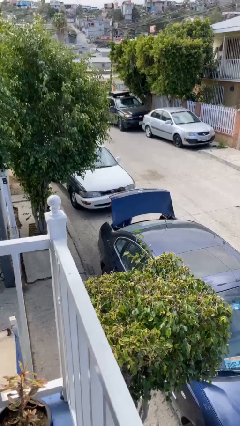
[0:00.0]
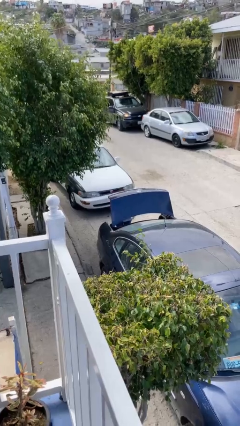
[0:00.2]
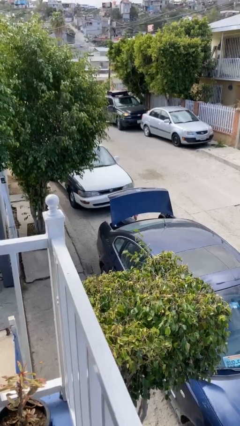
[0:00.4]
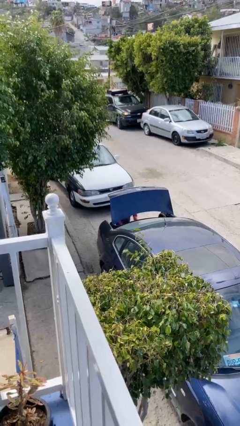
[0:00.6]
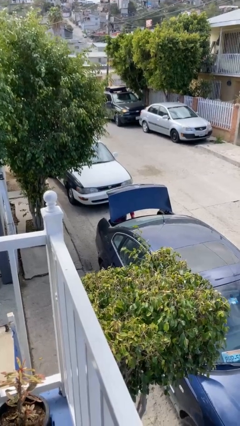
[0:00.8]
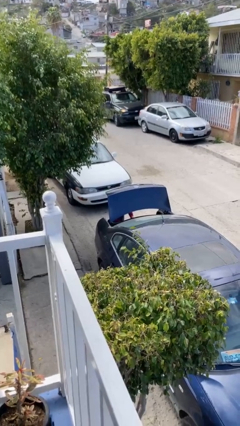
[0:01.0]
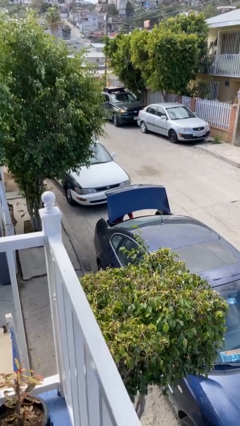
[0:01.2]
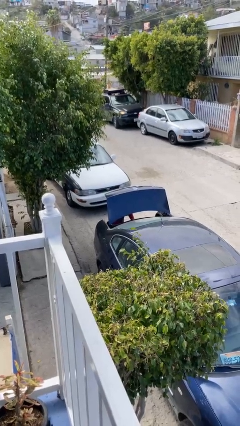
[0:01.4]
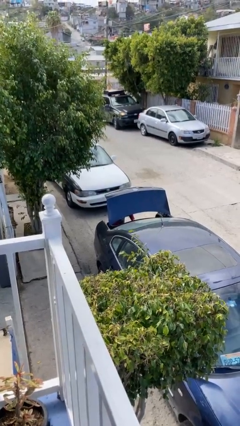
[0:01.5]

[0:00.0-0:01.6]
person loads car

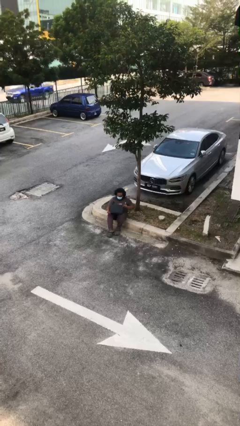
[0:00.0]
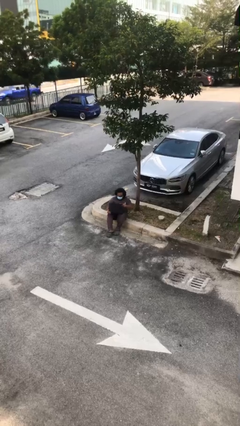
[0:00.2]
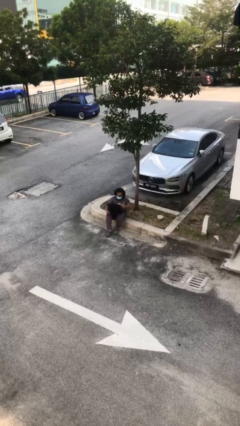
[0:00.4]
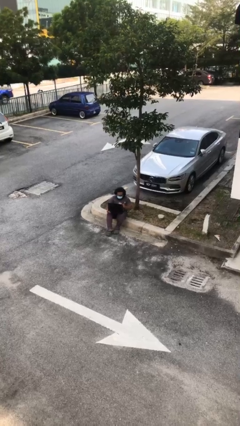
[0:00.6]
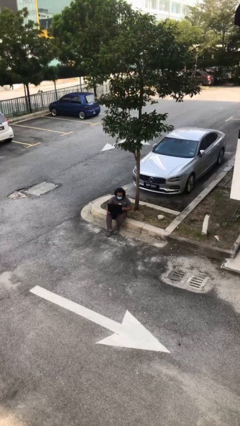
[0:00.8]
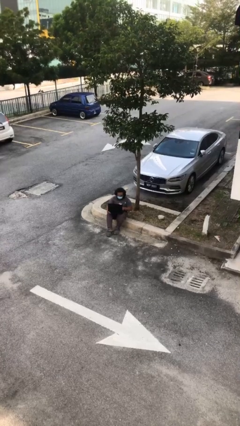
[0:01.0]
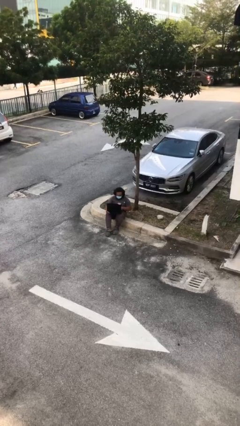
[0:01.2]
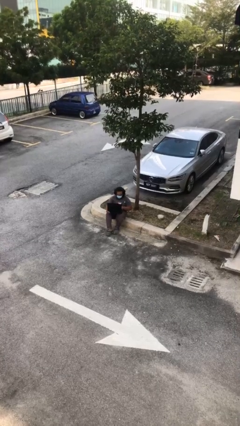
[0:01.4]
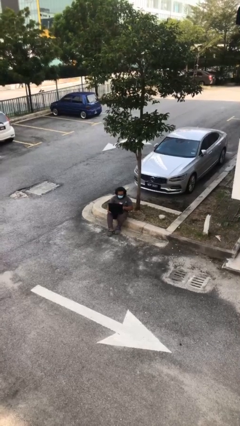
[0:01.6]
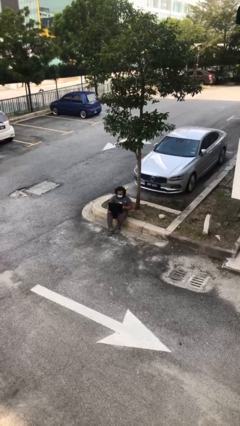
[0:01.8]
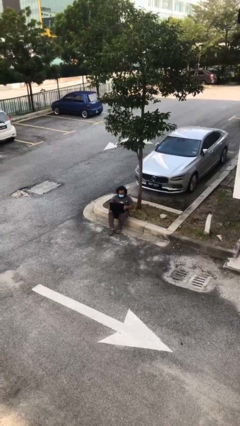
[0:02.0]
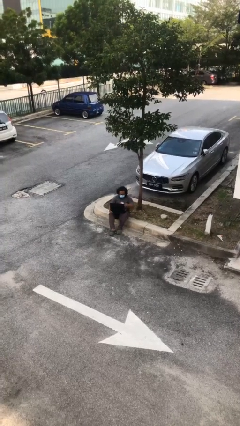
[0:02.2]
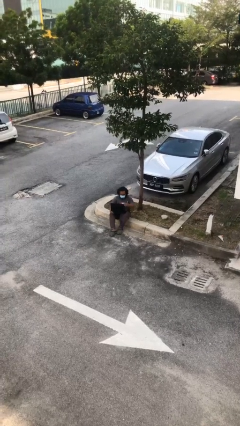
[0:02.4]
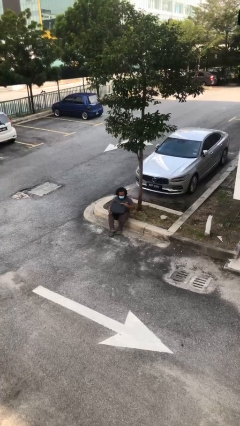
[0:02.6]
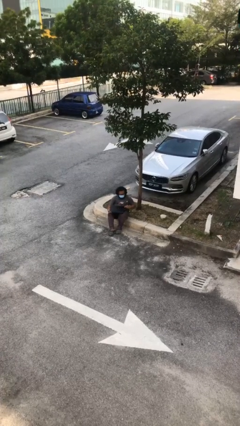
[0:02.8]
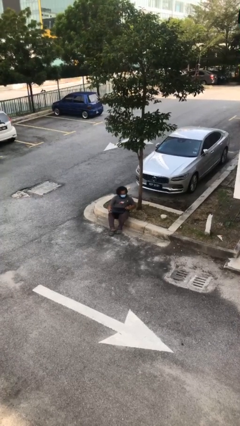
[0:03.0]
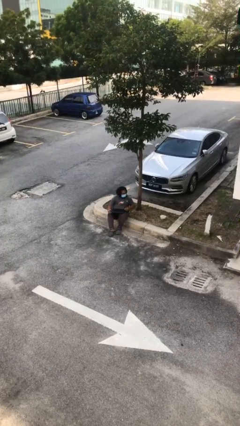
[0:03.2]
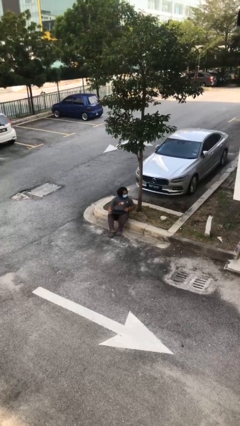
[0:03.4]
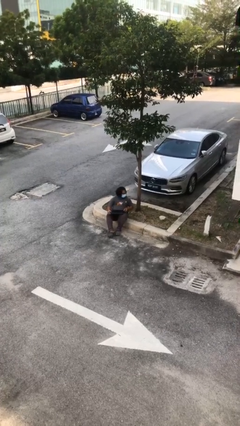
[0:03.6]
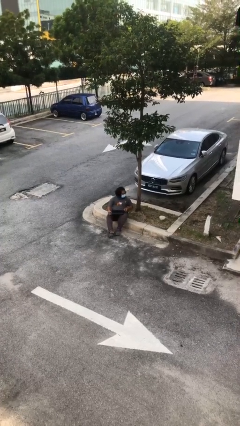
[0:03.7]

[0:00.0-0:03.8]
person interacts with laptop

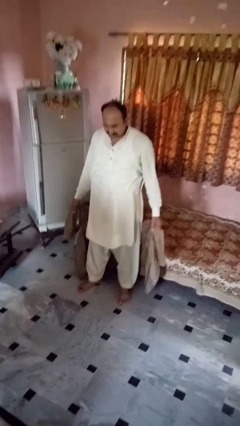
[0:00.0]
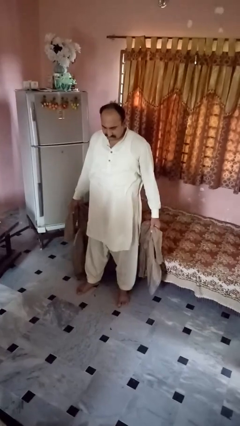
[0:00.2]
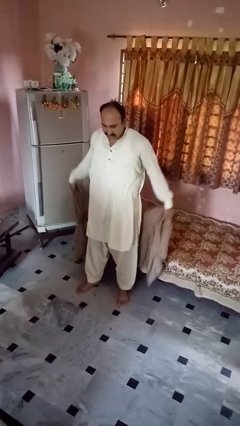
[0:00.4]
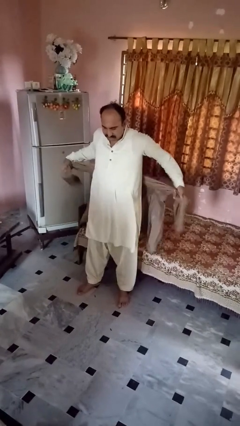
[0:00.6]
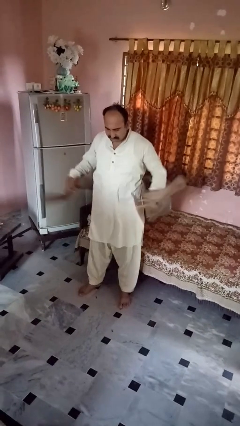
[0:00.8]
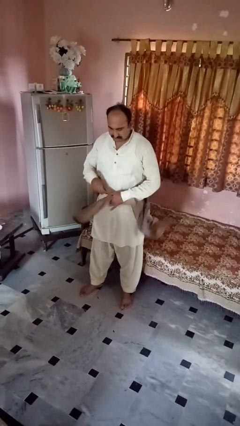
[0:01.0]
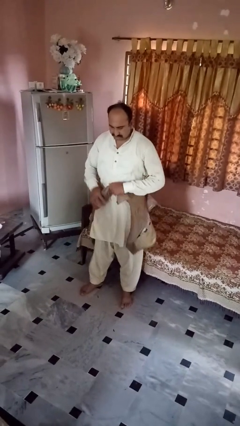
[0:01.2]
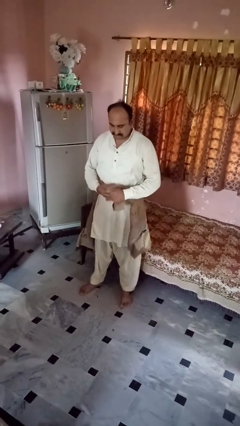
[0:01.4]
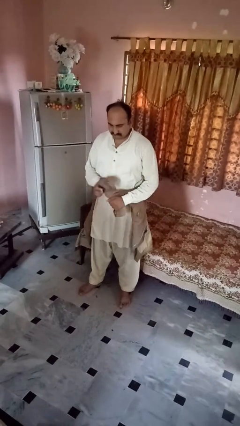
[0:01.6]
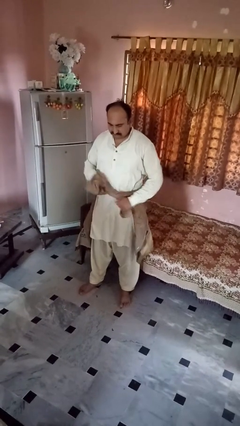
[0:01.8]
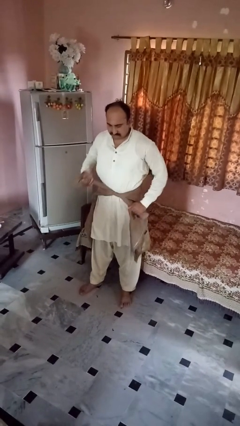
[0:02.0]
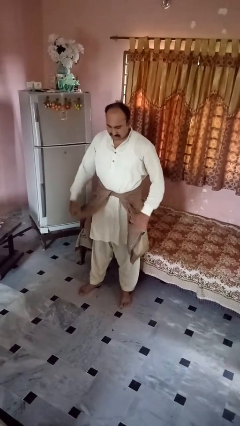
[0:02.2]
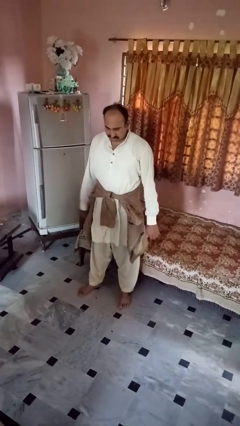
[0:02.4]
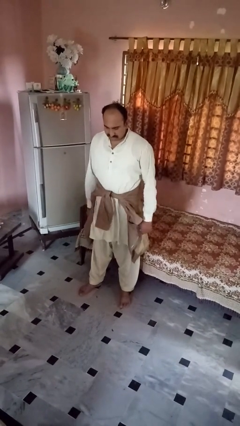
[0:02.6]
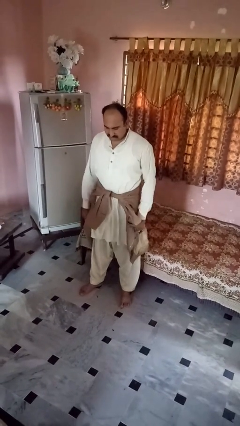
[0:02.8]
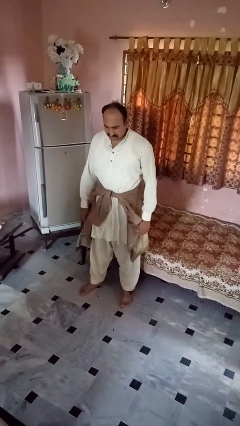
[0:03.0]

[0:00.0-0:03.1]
person ties jacket around waist

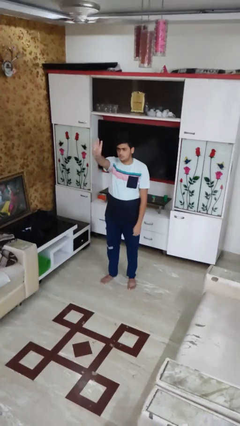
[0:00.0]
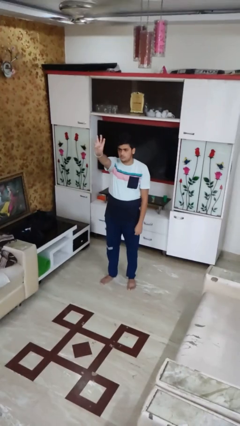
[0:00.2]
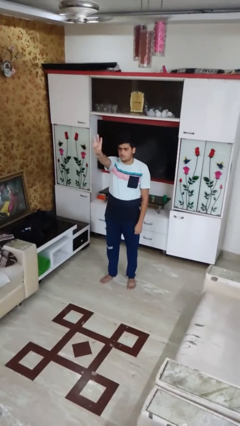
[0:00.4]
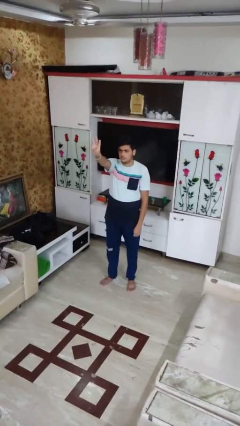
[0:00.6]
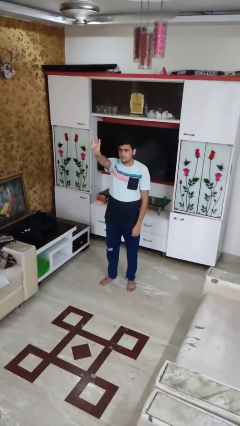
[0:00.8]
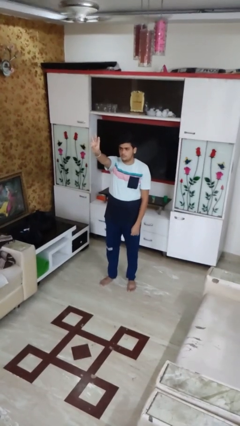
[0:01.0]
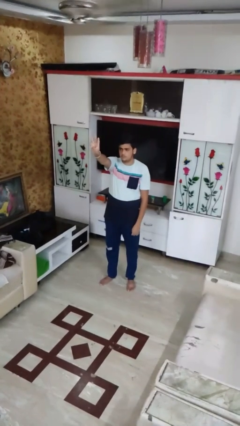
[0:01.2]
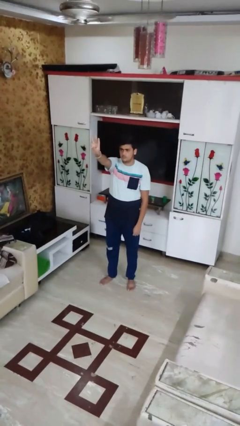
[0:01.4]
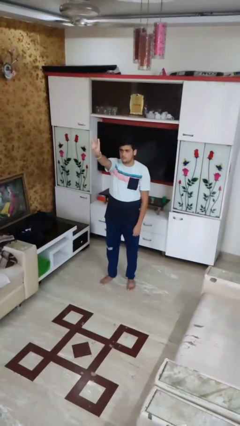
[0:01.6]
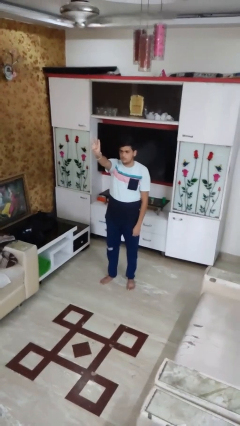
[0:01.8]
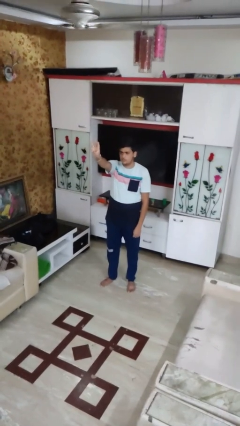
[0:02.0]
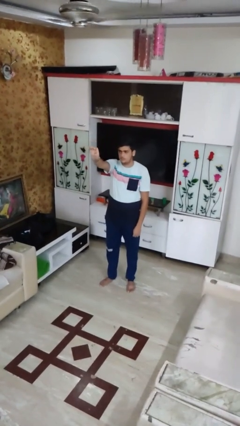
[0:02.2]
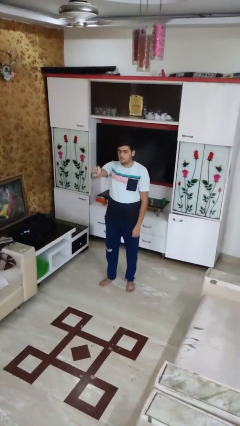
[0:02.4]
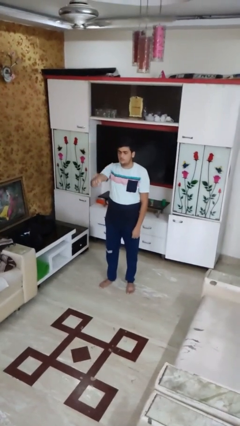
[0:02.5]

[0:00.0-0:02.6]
person gestures number three

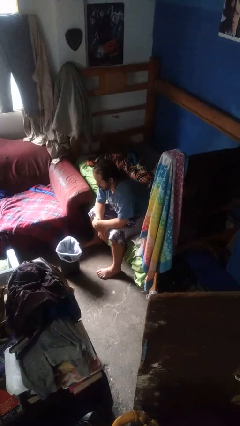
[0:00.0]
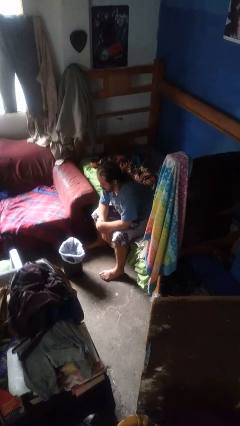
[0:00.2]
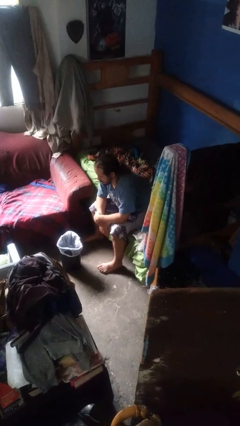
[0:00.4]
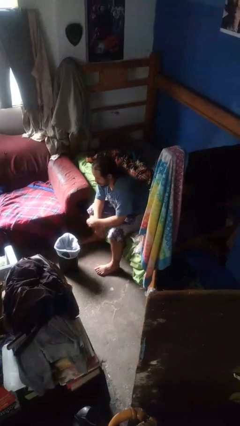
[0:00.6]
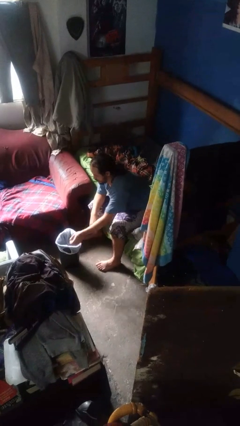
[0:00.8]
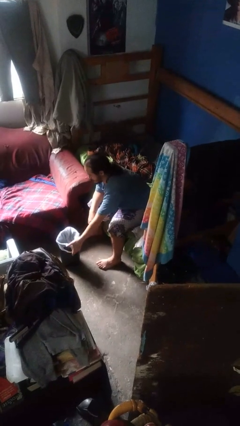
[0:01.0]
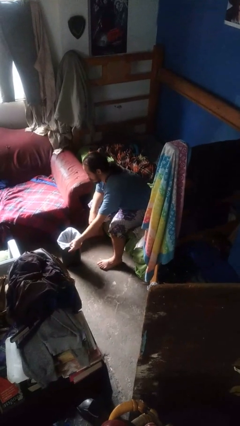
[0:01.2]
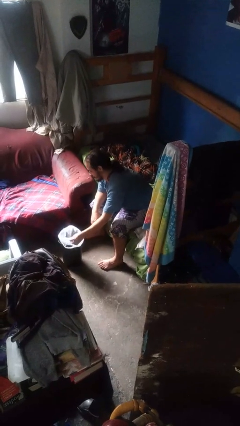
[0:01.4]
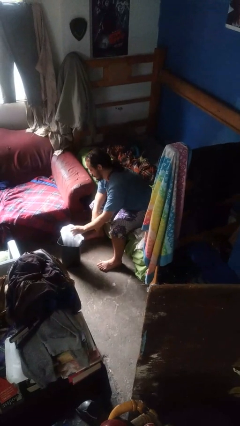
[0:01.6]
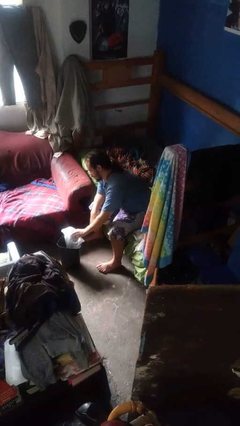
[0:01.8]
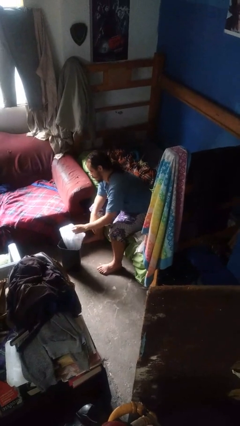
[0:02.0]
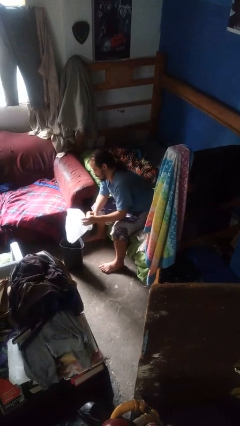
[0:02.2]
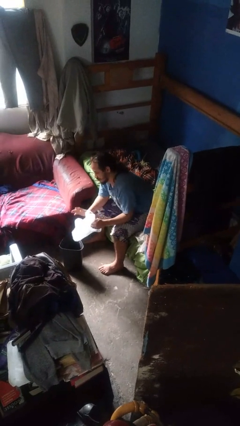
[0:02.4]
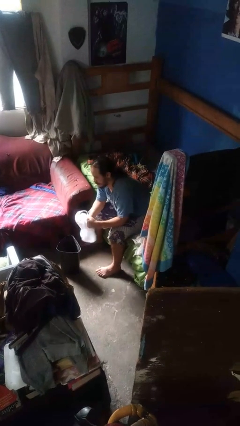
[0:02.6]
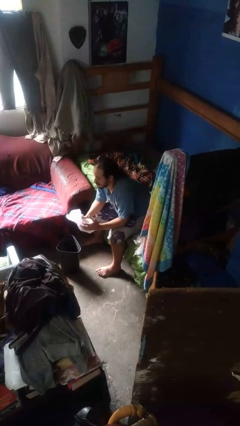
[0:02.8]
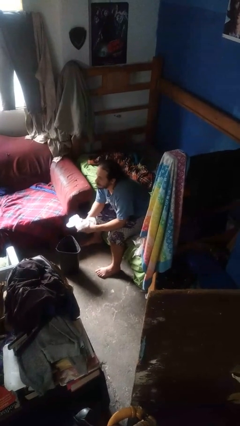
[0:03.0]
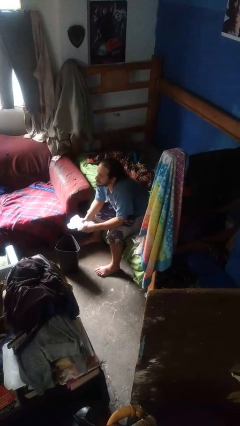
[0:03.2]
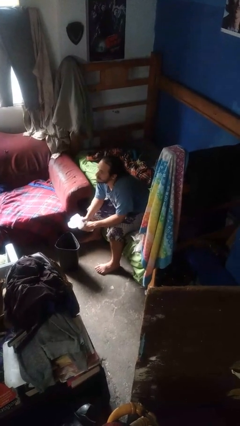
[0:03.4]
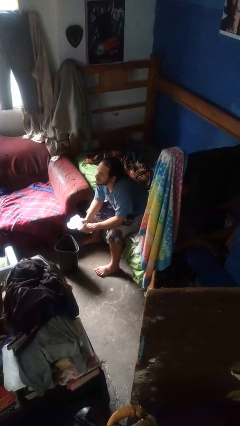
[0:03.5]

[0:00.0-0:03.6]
person removes trashbag from trashcan

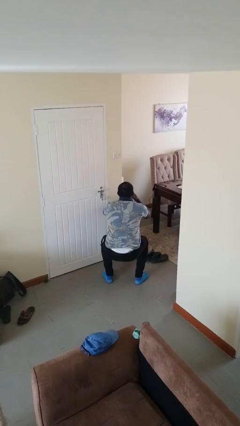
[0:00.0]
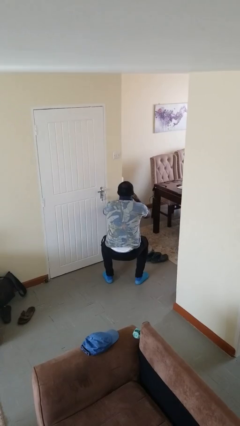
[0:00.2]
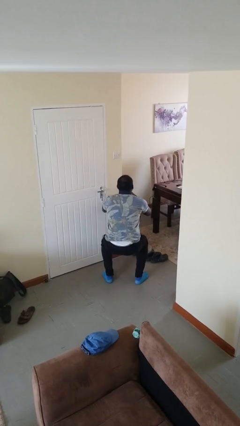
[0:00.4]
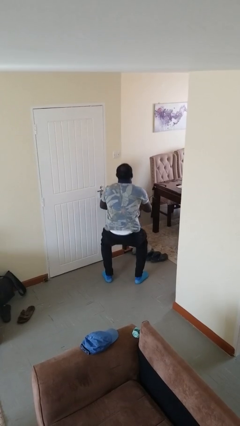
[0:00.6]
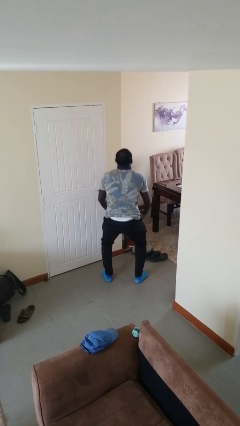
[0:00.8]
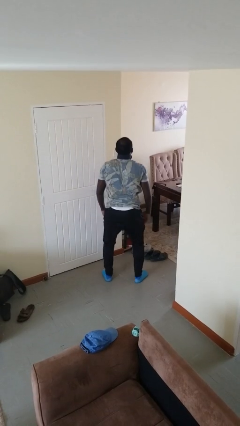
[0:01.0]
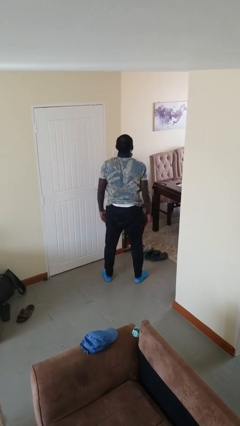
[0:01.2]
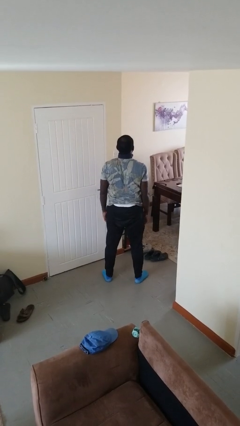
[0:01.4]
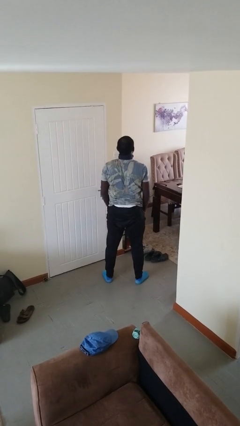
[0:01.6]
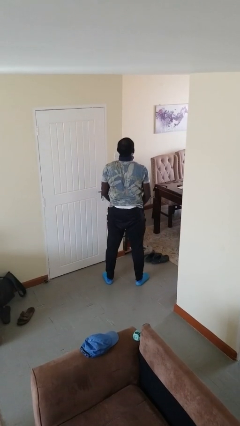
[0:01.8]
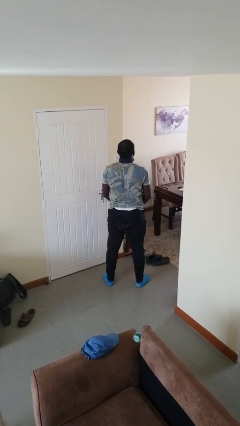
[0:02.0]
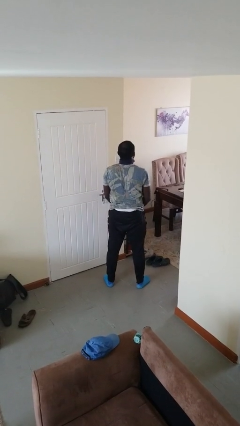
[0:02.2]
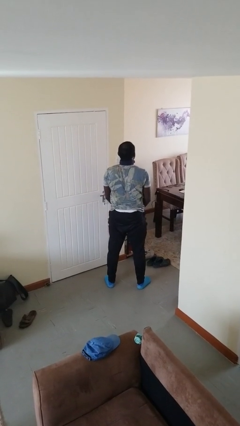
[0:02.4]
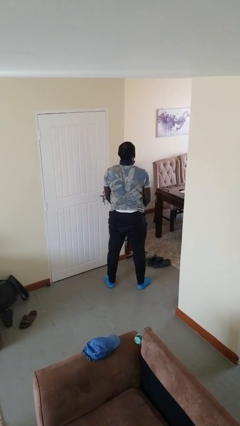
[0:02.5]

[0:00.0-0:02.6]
person stands up
